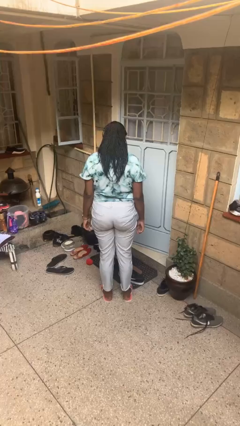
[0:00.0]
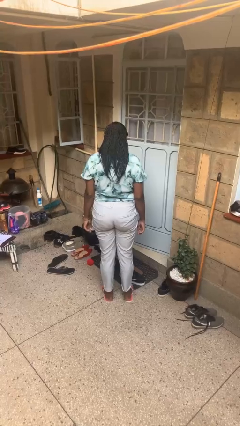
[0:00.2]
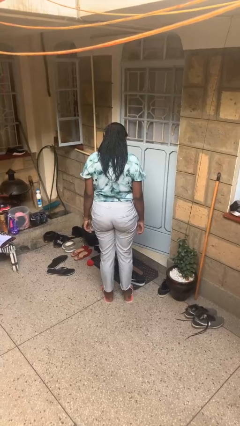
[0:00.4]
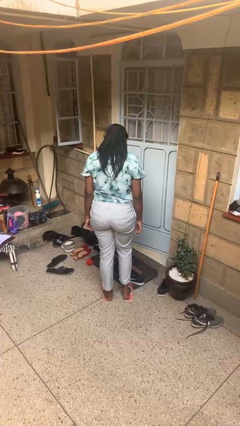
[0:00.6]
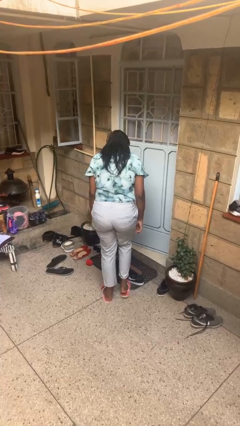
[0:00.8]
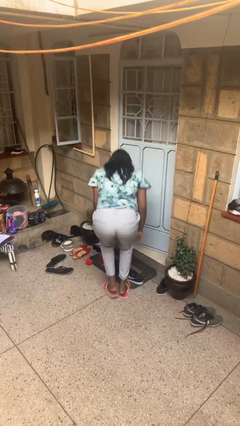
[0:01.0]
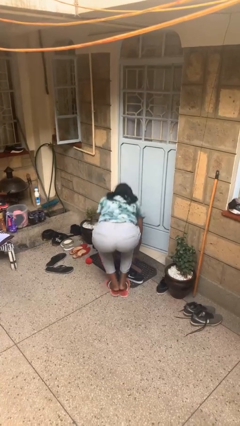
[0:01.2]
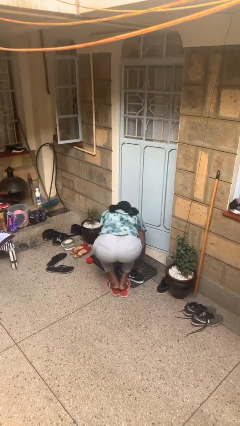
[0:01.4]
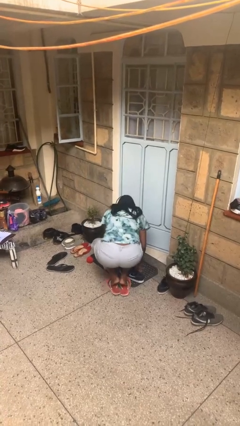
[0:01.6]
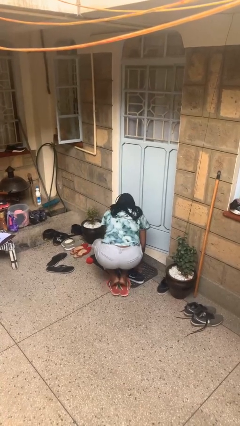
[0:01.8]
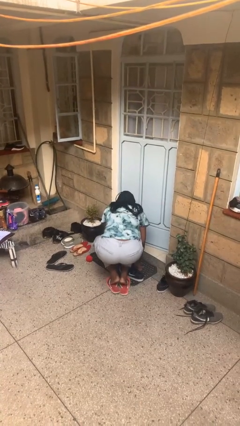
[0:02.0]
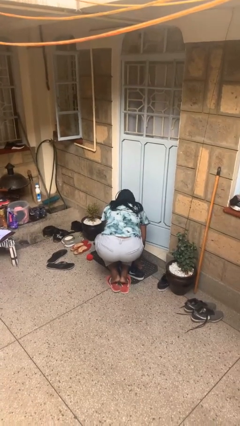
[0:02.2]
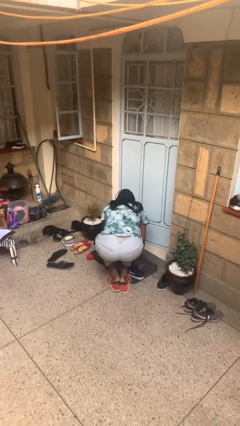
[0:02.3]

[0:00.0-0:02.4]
person trips on object on floor

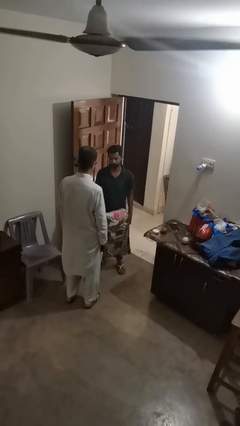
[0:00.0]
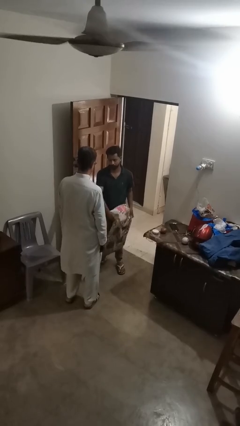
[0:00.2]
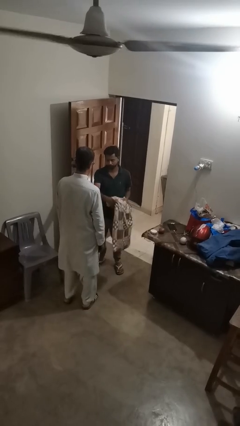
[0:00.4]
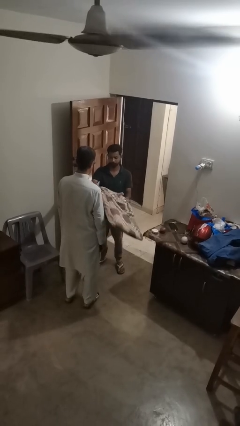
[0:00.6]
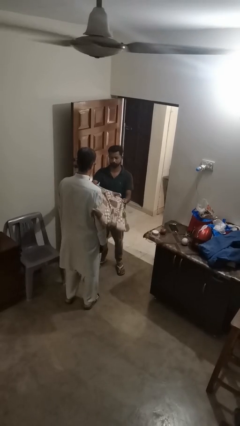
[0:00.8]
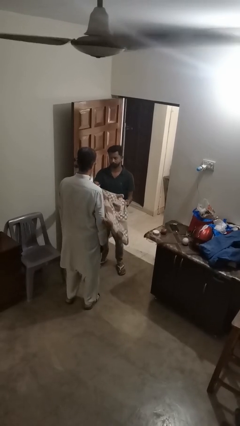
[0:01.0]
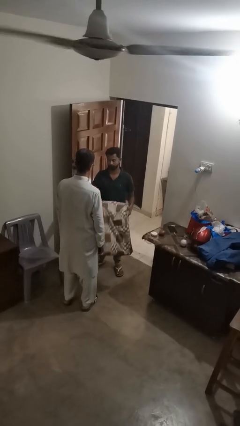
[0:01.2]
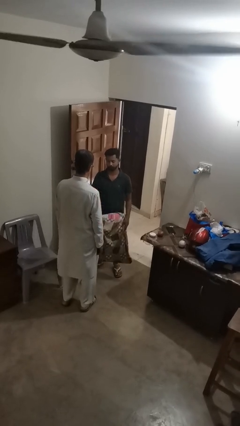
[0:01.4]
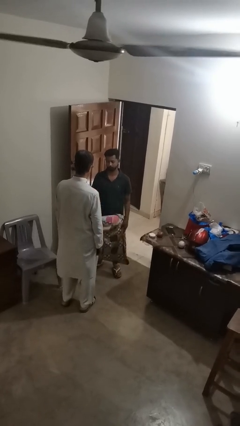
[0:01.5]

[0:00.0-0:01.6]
person hits person with pillow

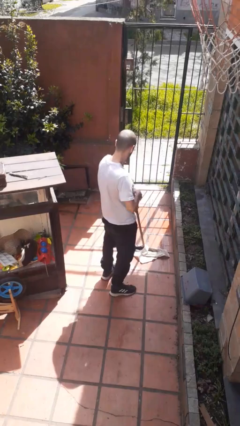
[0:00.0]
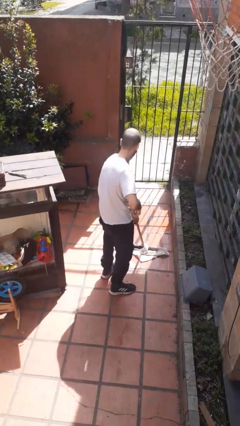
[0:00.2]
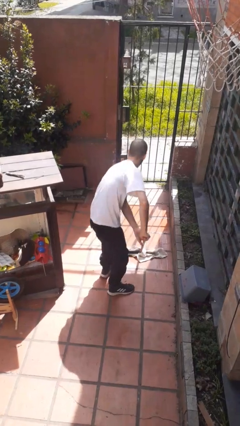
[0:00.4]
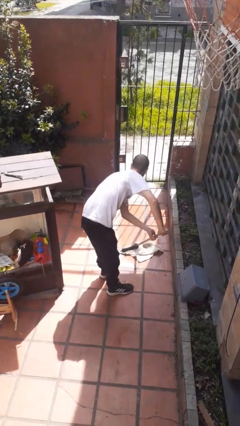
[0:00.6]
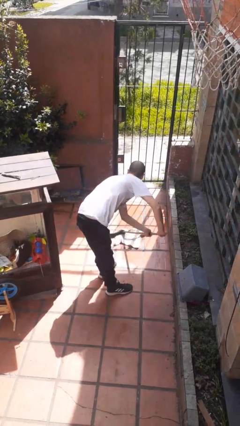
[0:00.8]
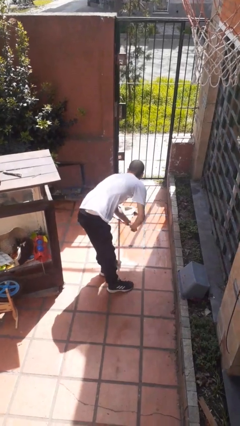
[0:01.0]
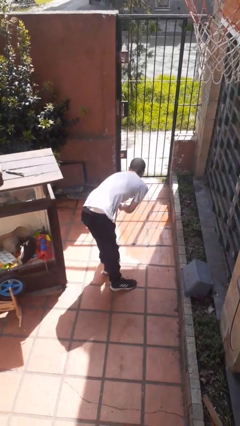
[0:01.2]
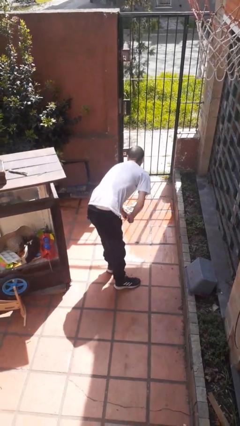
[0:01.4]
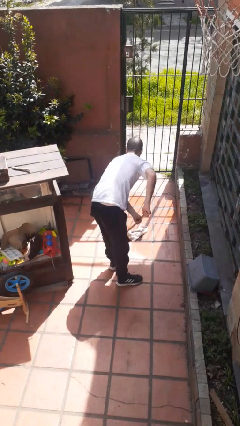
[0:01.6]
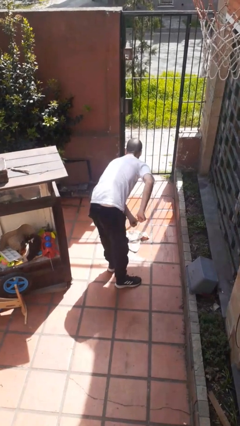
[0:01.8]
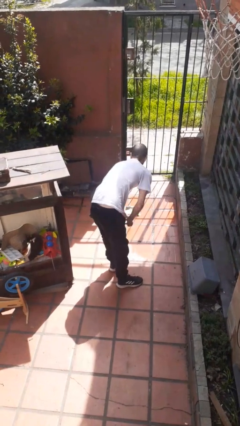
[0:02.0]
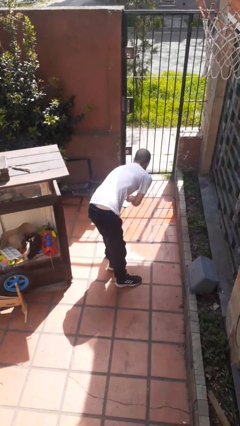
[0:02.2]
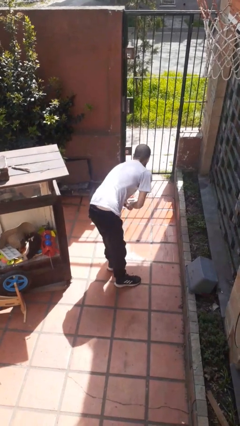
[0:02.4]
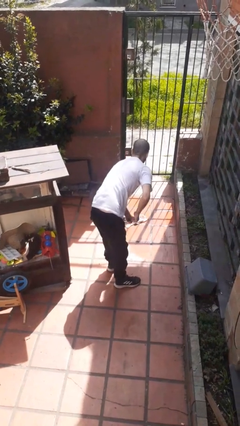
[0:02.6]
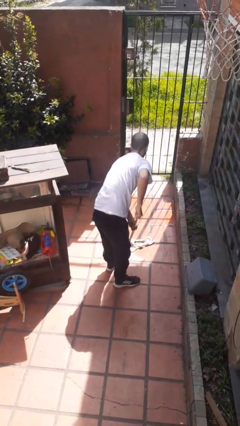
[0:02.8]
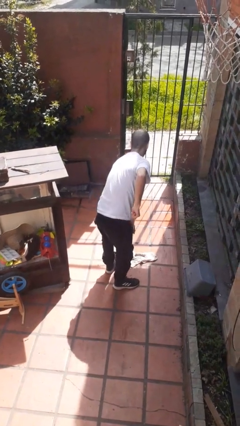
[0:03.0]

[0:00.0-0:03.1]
person mops

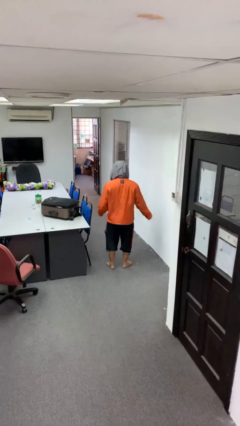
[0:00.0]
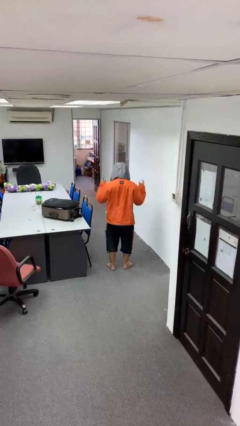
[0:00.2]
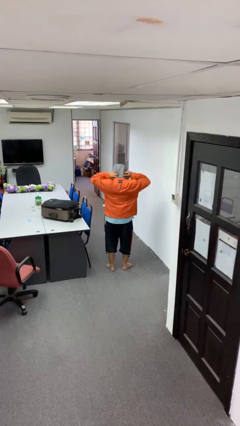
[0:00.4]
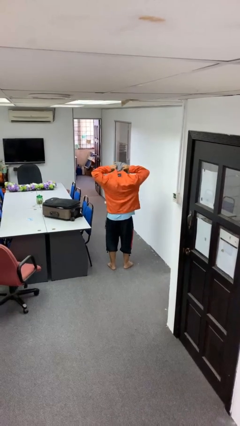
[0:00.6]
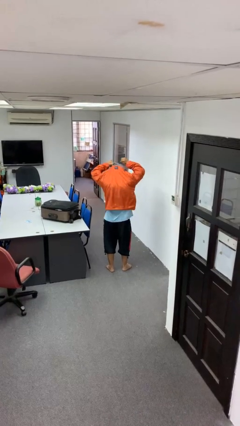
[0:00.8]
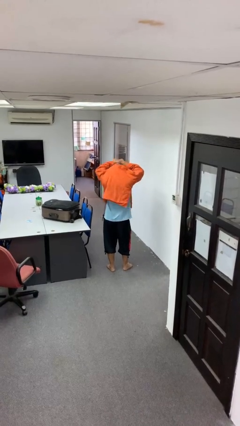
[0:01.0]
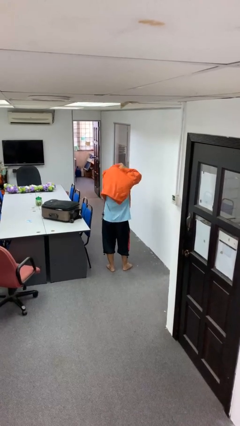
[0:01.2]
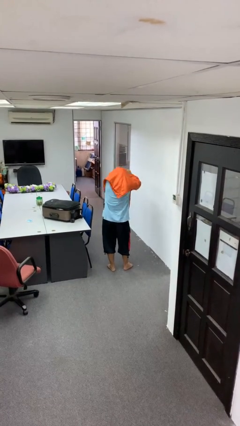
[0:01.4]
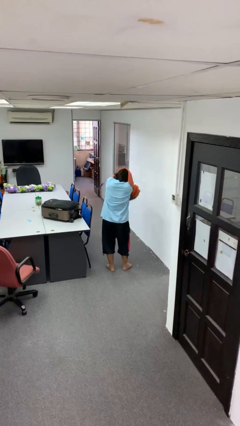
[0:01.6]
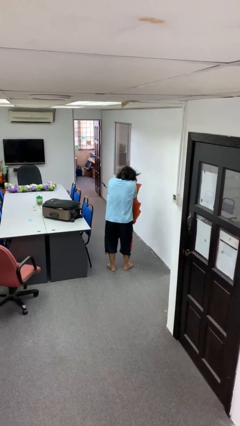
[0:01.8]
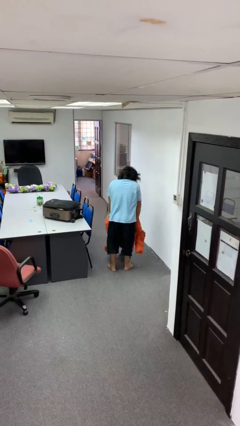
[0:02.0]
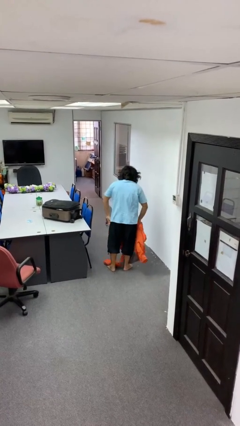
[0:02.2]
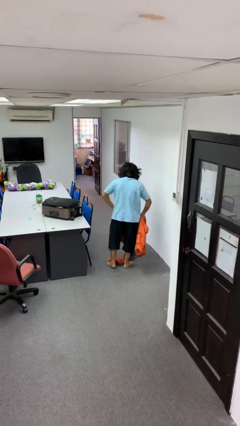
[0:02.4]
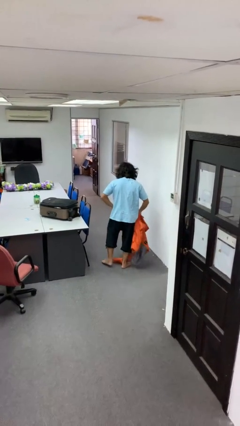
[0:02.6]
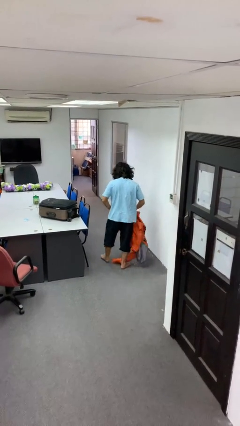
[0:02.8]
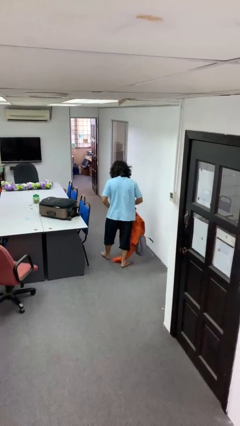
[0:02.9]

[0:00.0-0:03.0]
person takes off hoodie

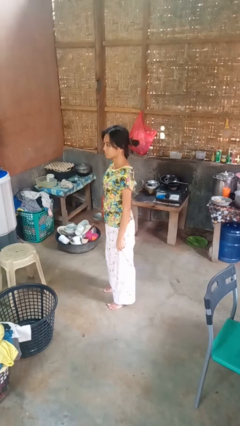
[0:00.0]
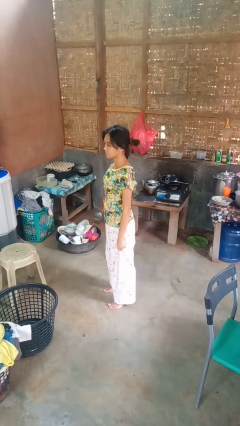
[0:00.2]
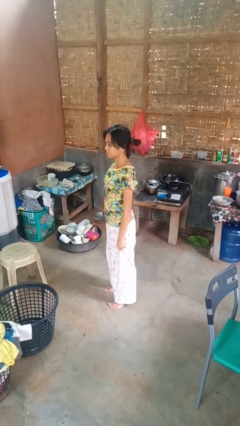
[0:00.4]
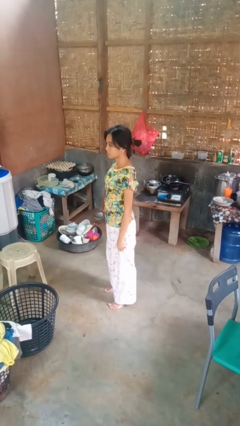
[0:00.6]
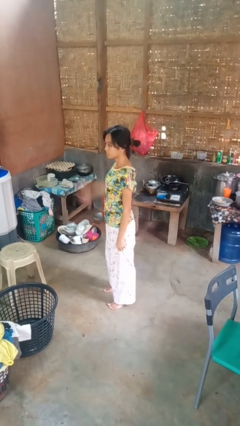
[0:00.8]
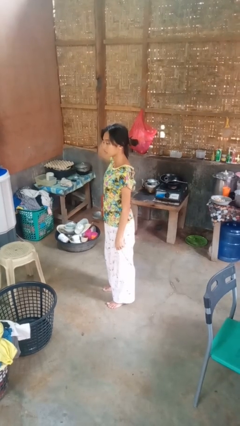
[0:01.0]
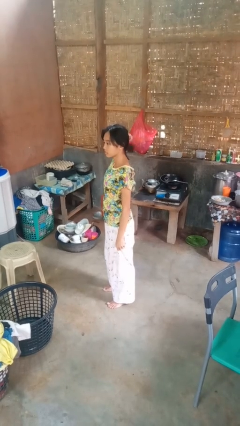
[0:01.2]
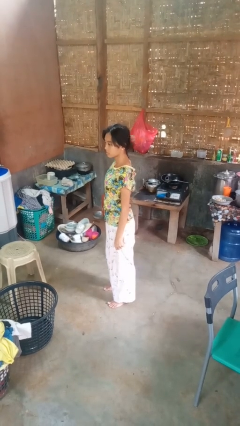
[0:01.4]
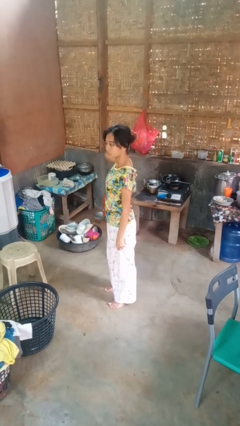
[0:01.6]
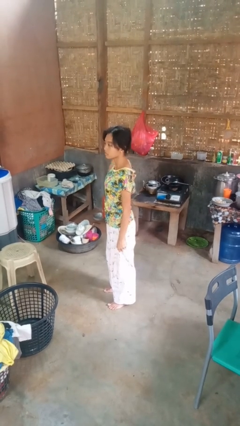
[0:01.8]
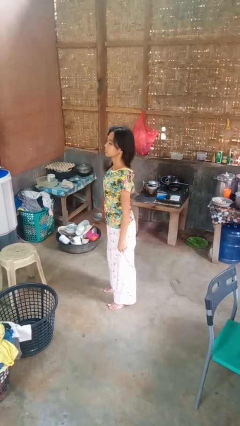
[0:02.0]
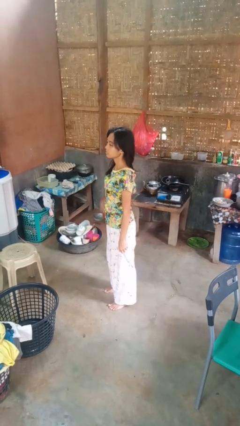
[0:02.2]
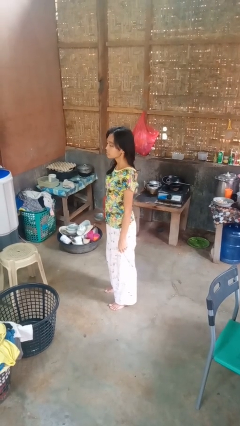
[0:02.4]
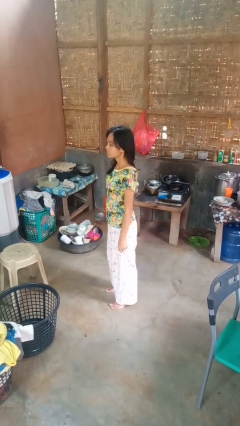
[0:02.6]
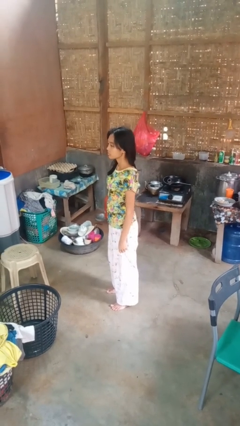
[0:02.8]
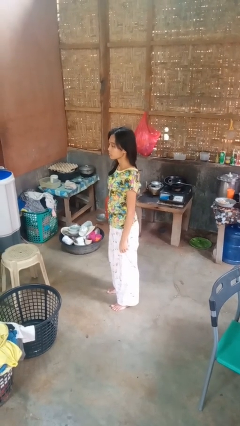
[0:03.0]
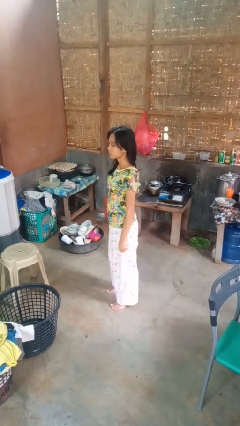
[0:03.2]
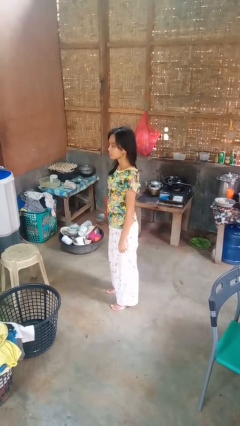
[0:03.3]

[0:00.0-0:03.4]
person takes off hairtie

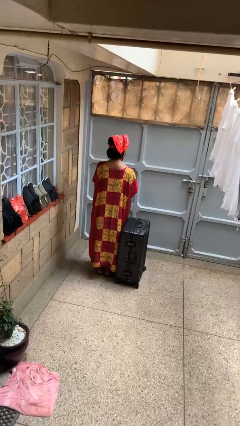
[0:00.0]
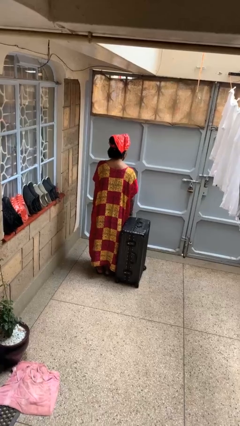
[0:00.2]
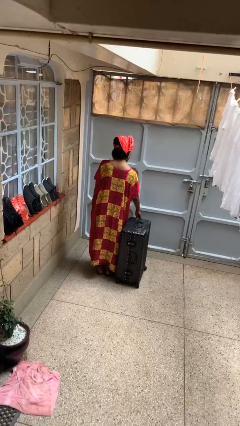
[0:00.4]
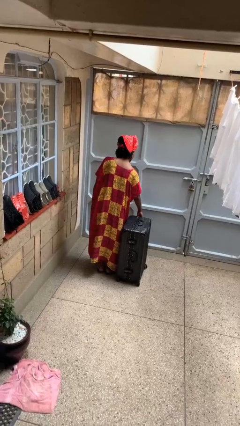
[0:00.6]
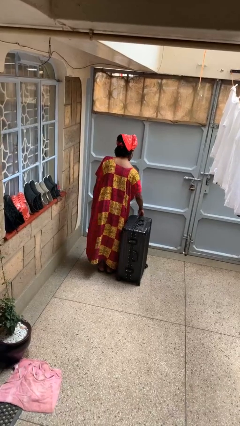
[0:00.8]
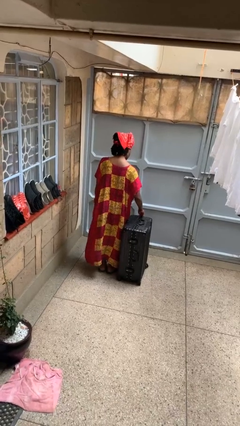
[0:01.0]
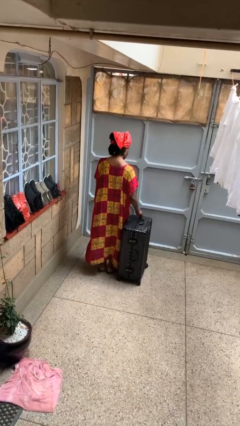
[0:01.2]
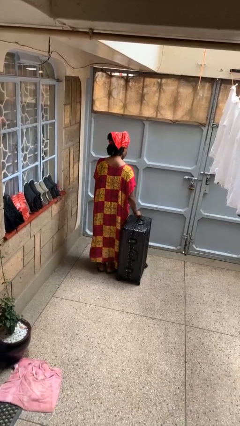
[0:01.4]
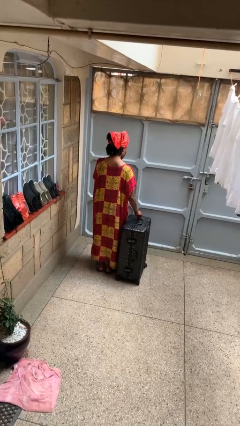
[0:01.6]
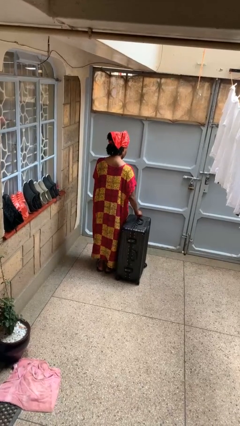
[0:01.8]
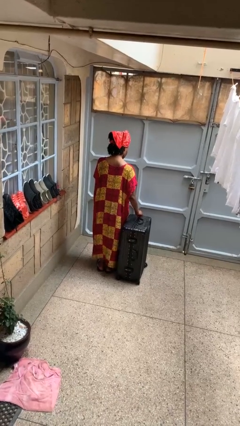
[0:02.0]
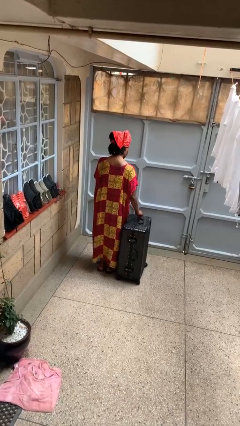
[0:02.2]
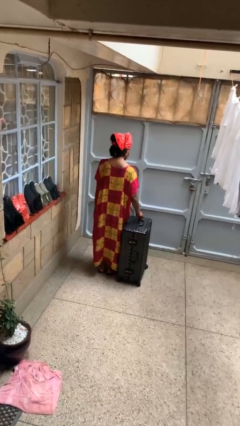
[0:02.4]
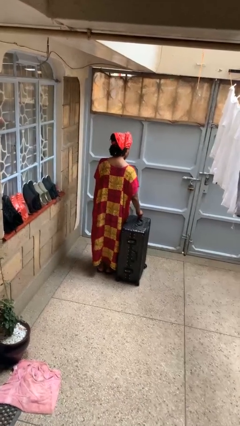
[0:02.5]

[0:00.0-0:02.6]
person opens suitcase

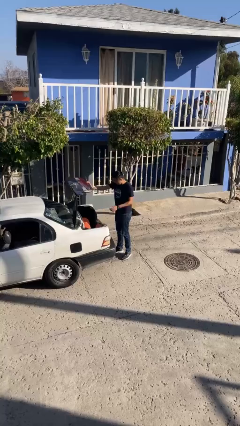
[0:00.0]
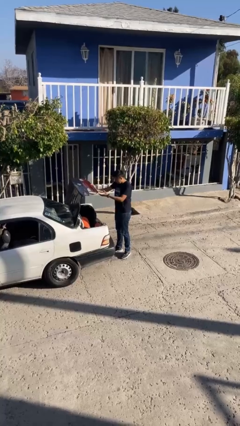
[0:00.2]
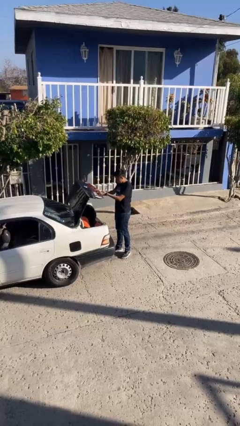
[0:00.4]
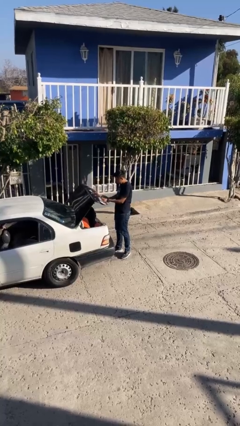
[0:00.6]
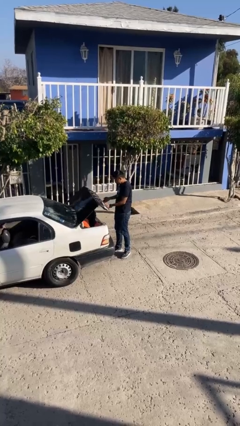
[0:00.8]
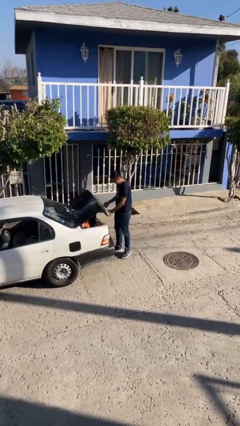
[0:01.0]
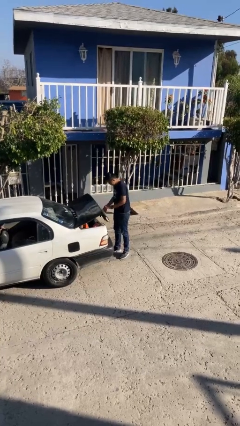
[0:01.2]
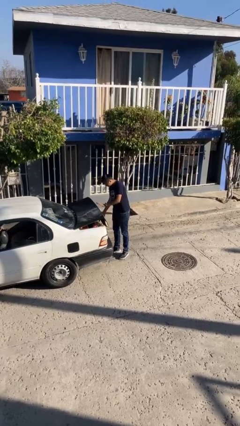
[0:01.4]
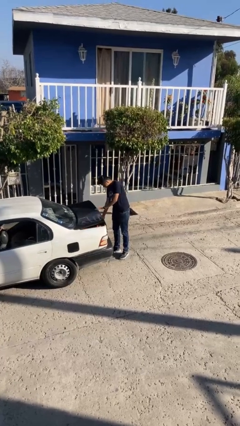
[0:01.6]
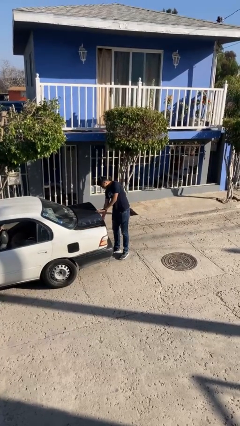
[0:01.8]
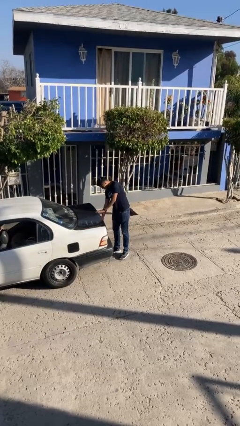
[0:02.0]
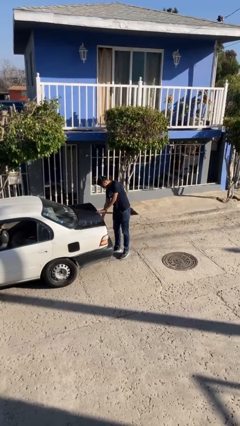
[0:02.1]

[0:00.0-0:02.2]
person closes car trunk
